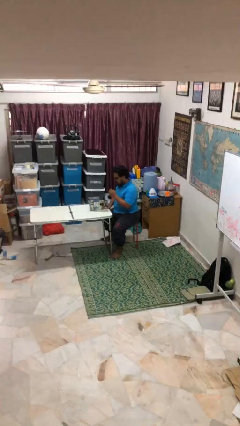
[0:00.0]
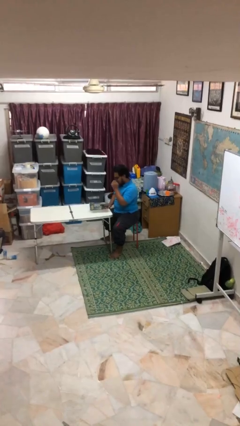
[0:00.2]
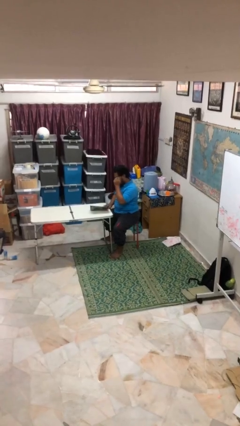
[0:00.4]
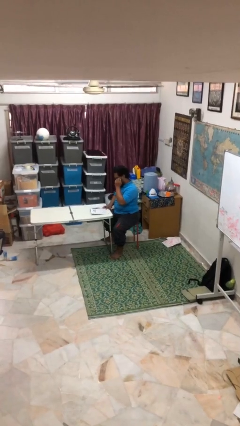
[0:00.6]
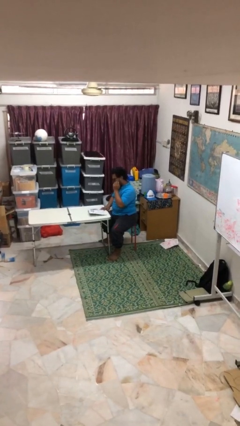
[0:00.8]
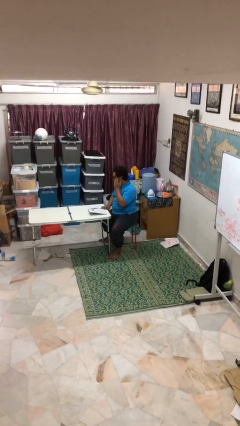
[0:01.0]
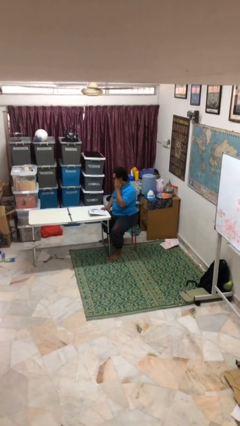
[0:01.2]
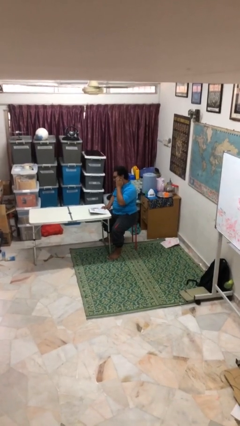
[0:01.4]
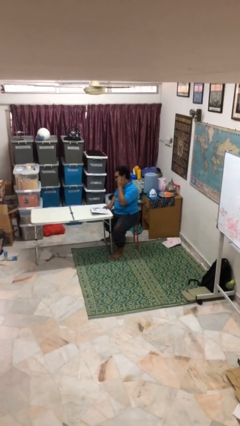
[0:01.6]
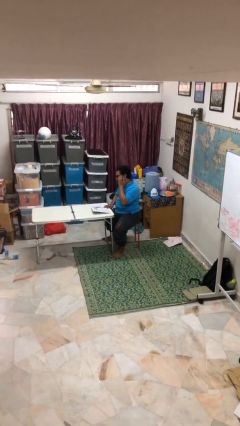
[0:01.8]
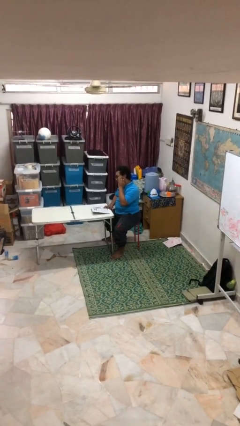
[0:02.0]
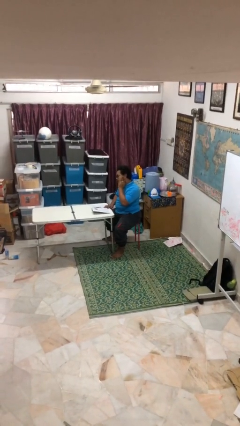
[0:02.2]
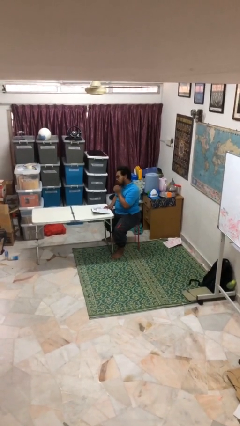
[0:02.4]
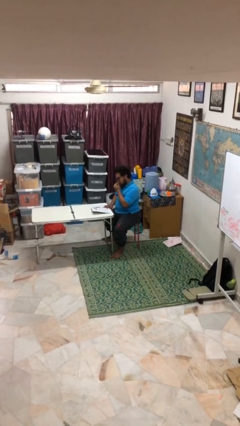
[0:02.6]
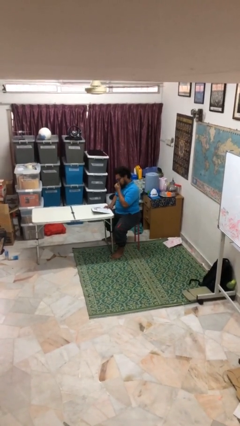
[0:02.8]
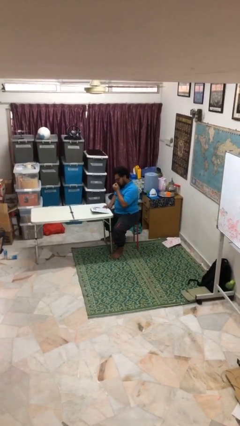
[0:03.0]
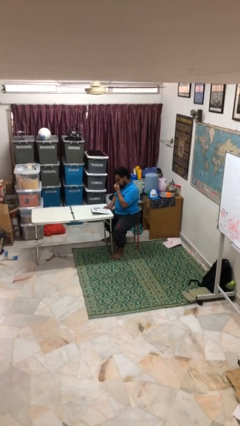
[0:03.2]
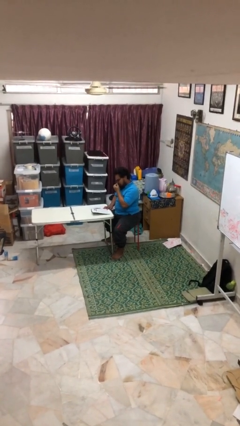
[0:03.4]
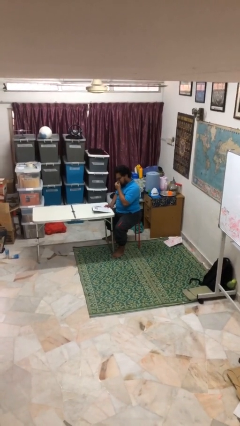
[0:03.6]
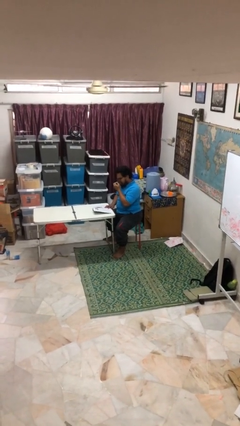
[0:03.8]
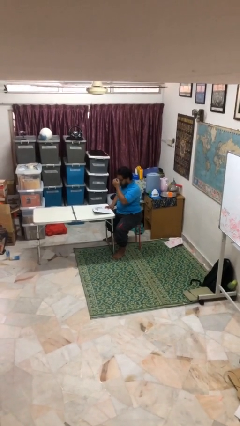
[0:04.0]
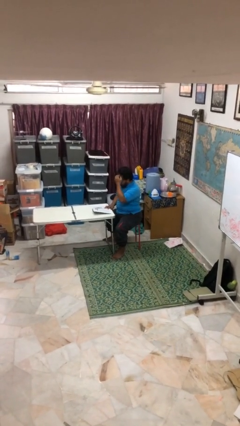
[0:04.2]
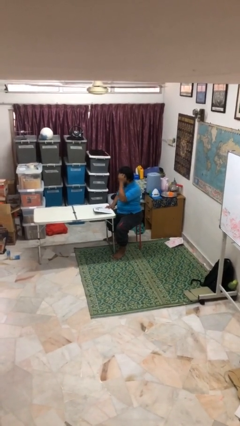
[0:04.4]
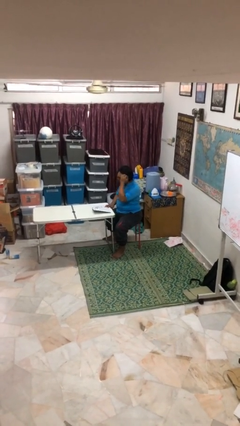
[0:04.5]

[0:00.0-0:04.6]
person reads document

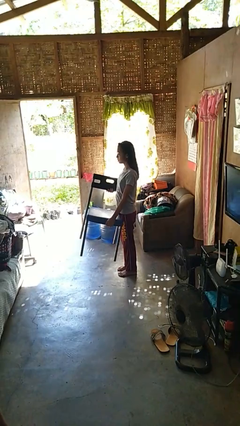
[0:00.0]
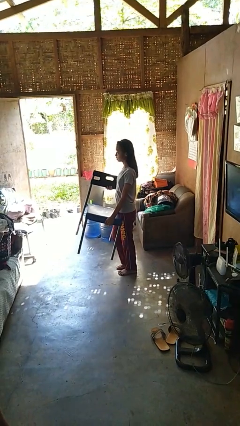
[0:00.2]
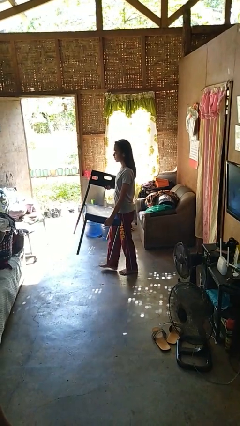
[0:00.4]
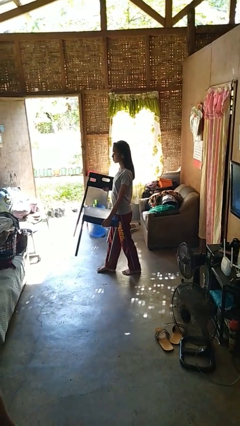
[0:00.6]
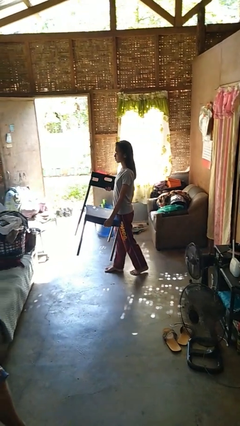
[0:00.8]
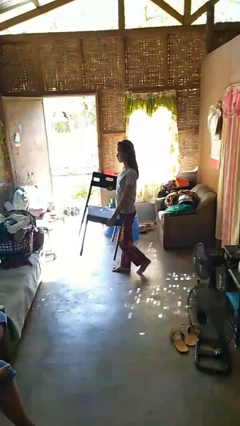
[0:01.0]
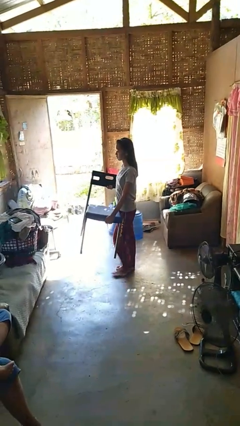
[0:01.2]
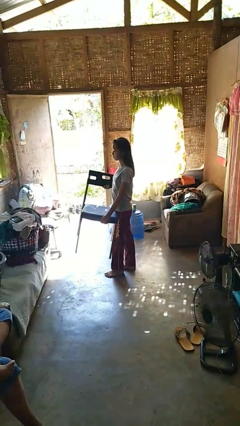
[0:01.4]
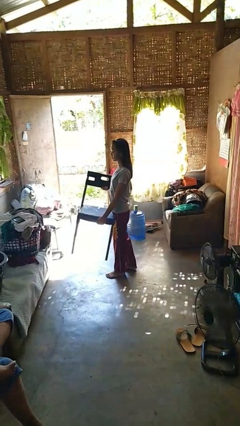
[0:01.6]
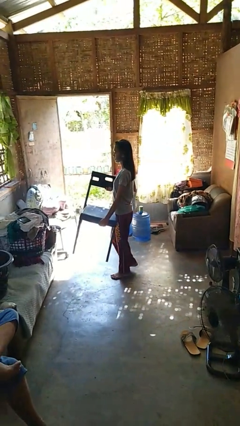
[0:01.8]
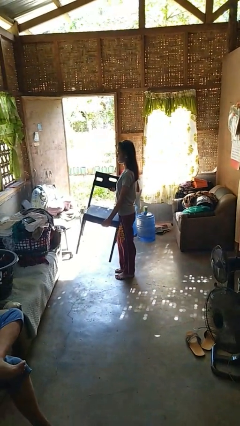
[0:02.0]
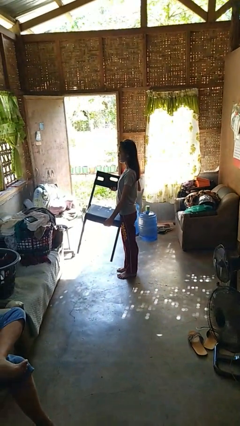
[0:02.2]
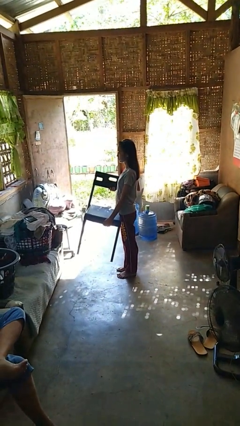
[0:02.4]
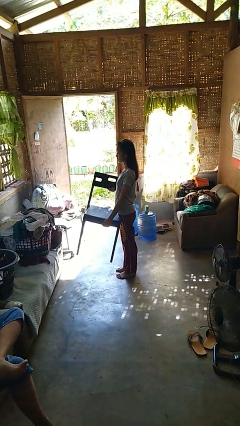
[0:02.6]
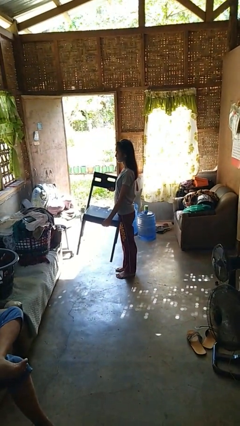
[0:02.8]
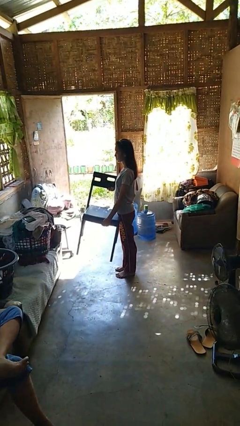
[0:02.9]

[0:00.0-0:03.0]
person carries furniture

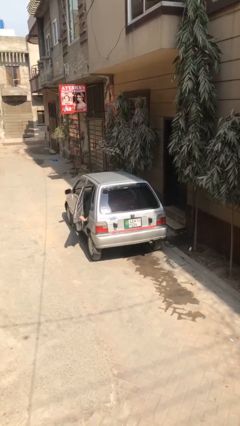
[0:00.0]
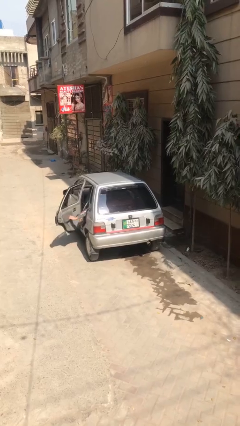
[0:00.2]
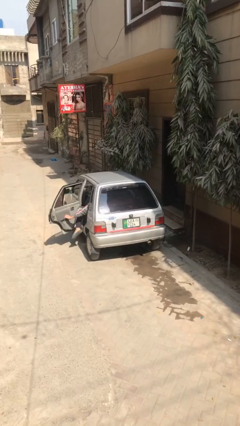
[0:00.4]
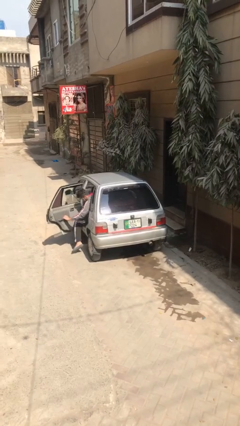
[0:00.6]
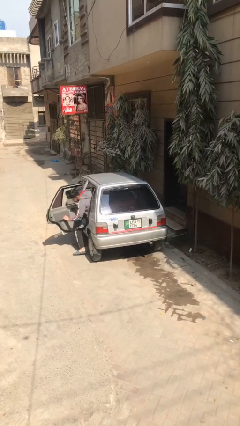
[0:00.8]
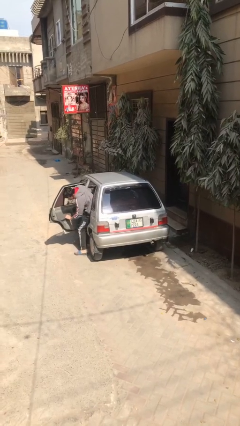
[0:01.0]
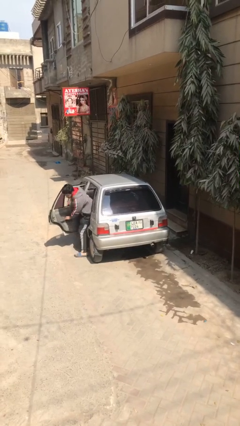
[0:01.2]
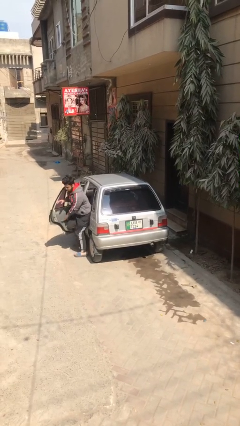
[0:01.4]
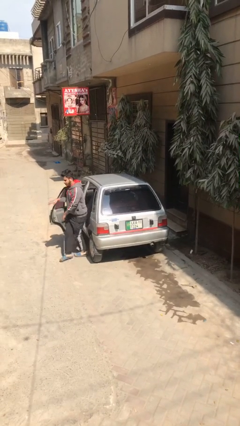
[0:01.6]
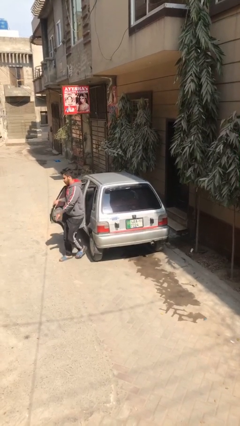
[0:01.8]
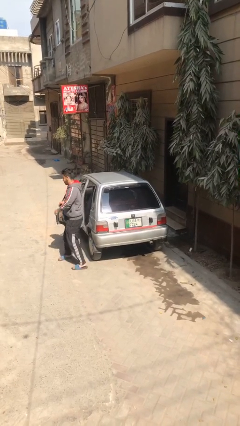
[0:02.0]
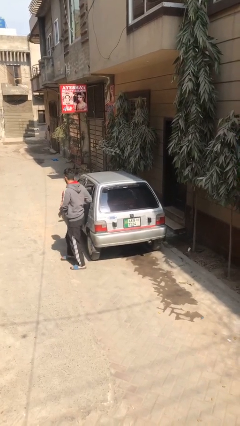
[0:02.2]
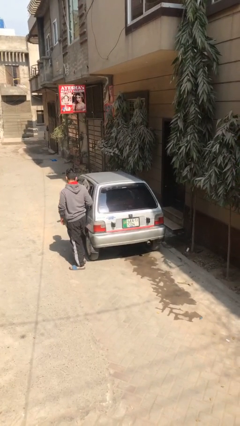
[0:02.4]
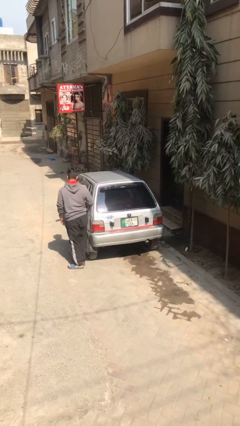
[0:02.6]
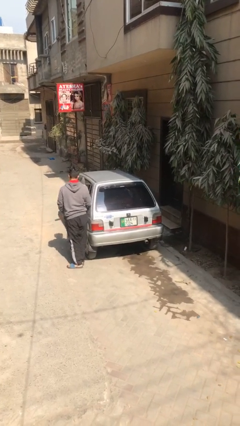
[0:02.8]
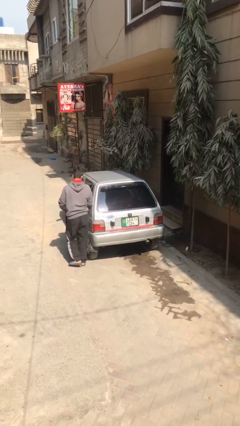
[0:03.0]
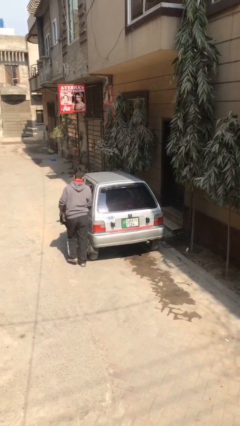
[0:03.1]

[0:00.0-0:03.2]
car drops off person

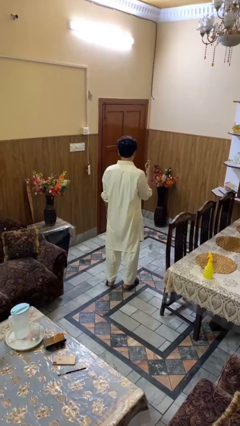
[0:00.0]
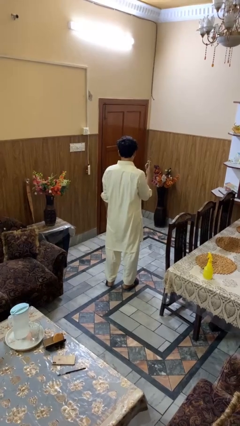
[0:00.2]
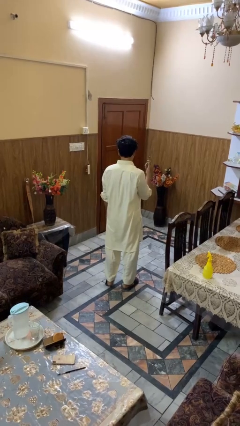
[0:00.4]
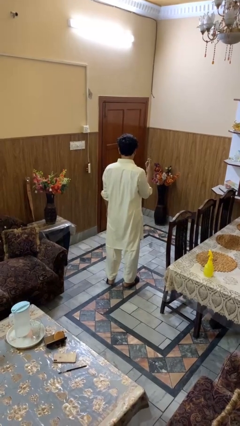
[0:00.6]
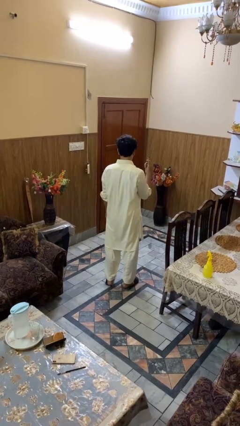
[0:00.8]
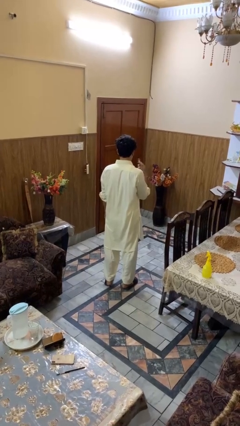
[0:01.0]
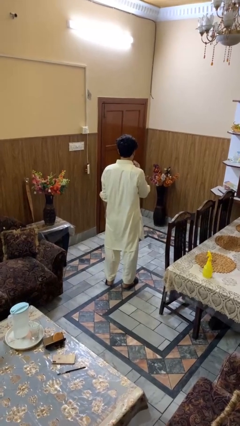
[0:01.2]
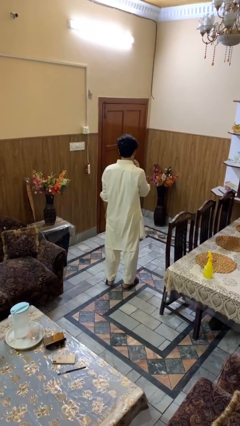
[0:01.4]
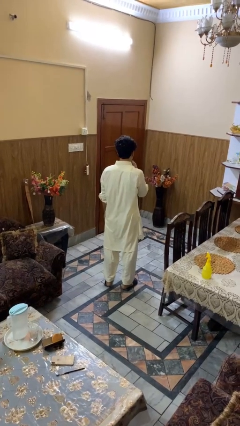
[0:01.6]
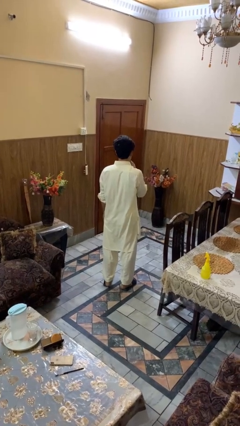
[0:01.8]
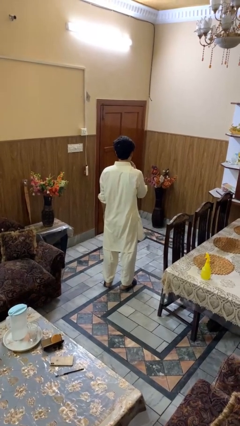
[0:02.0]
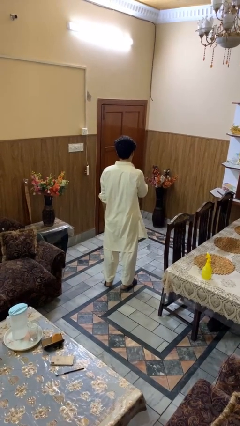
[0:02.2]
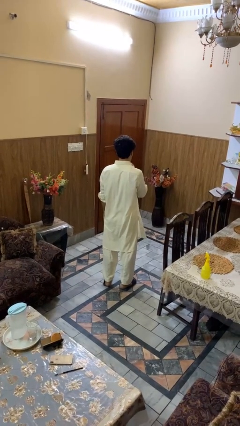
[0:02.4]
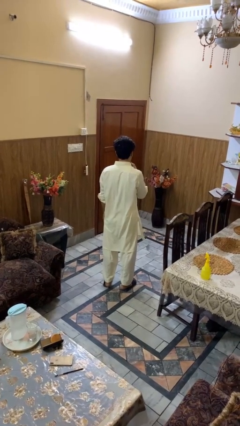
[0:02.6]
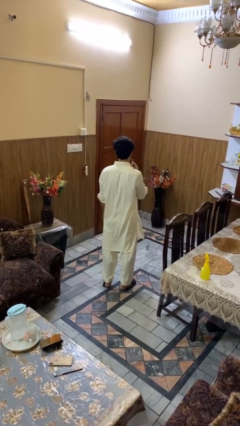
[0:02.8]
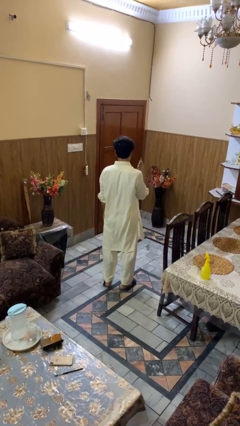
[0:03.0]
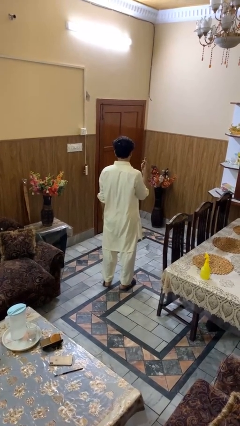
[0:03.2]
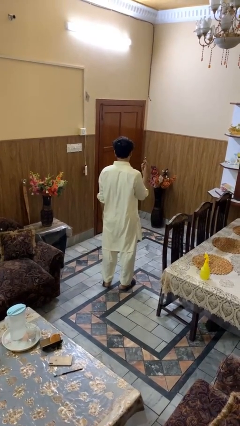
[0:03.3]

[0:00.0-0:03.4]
person applies lip makeup

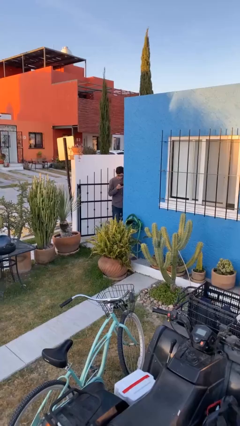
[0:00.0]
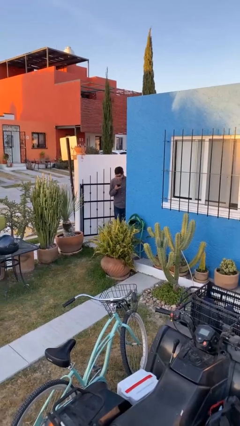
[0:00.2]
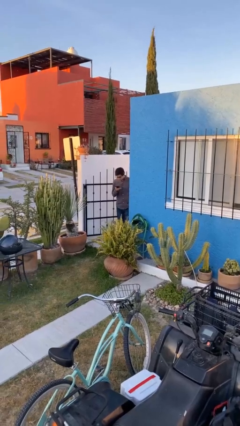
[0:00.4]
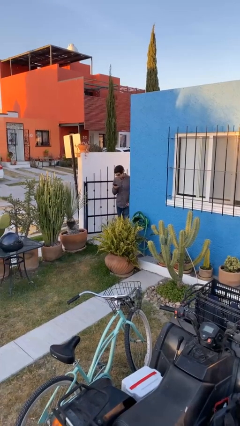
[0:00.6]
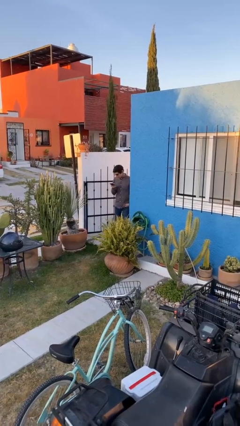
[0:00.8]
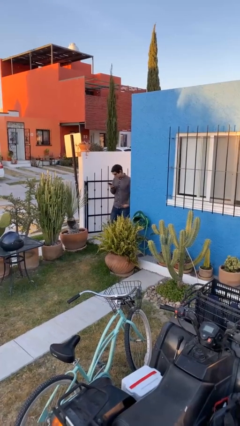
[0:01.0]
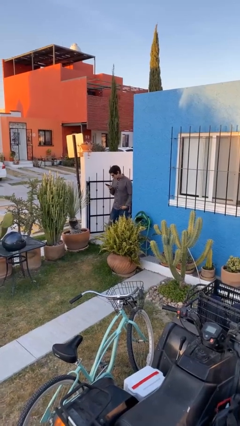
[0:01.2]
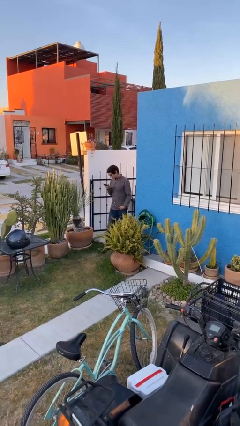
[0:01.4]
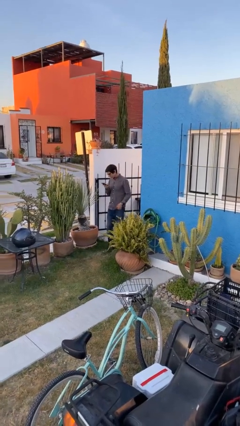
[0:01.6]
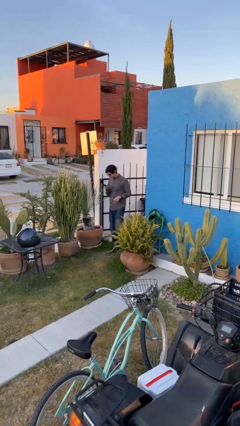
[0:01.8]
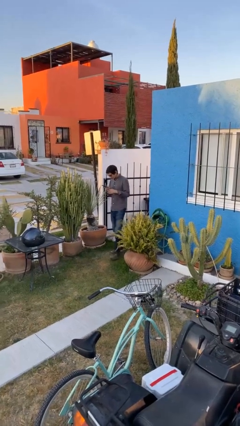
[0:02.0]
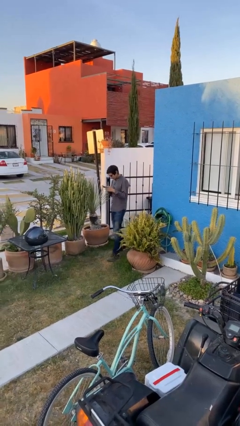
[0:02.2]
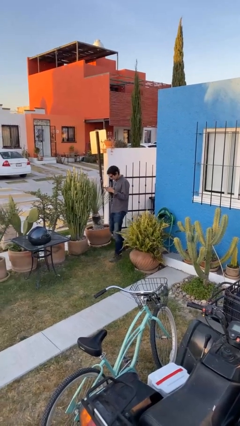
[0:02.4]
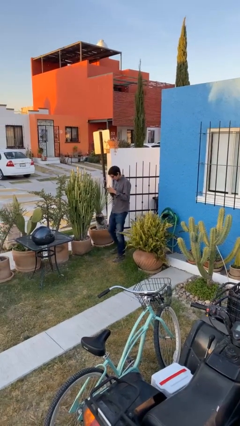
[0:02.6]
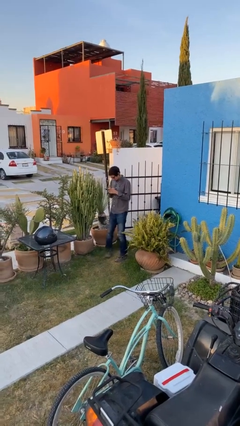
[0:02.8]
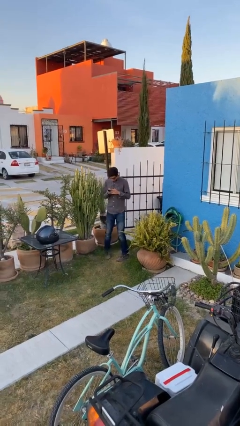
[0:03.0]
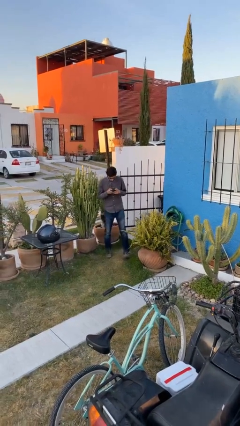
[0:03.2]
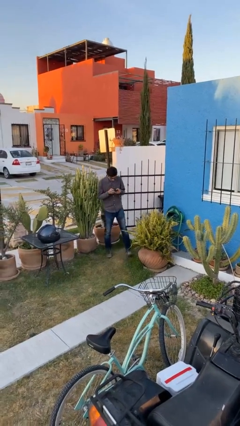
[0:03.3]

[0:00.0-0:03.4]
person enters scene through structure

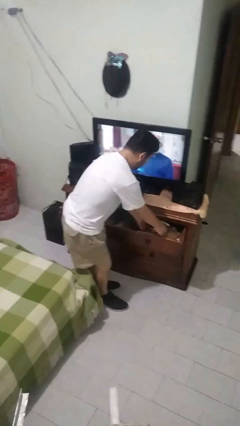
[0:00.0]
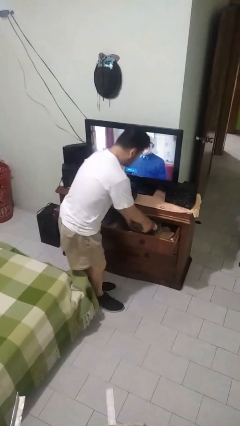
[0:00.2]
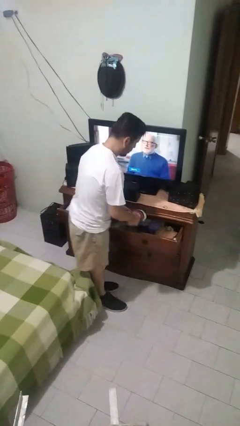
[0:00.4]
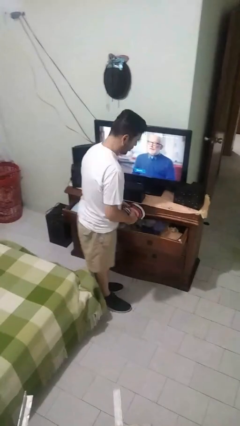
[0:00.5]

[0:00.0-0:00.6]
person takes clothes from dresser
